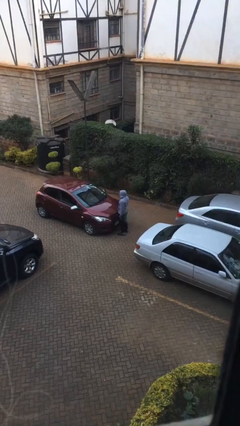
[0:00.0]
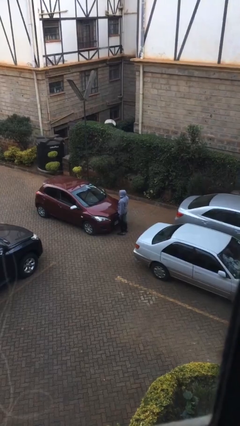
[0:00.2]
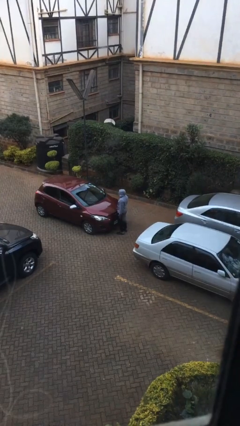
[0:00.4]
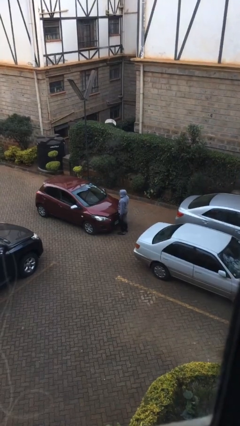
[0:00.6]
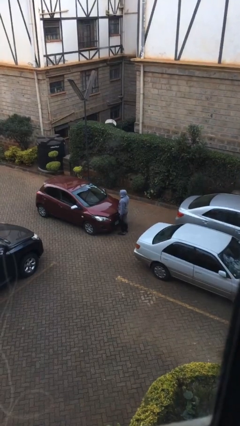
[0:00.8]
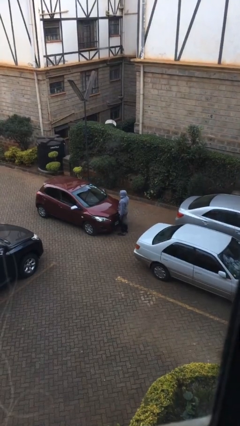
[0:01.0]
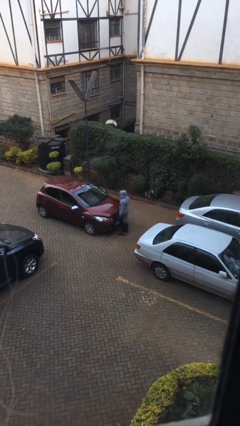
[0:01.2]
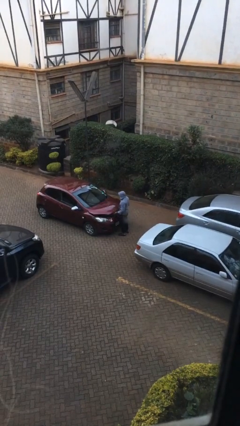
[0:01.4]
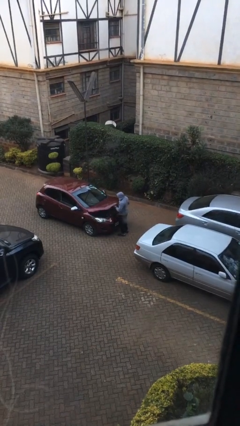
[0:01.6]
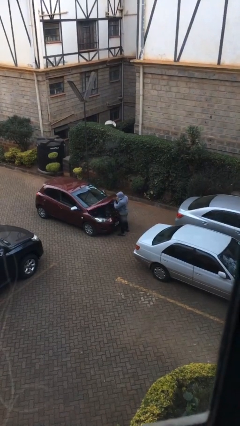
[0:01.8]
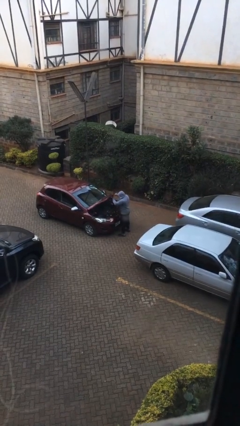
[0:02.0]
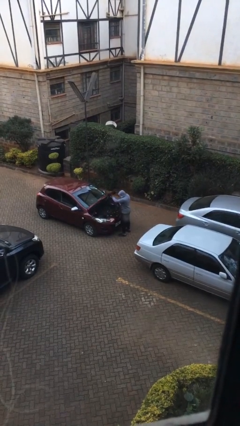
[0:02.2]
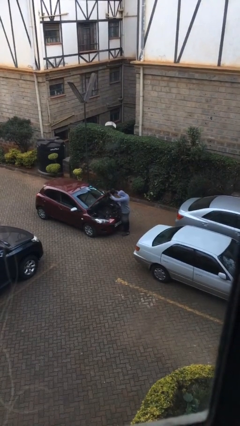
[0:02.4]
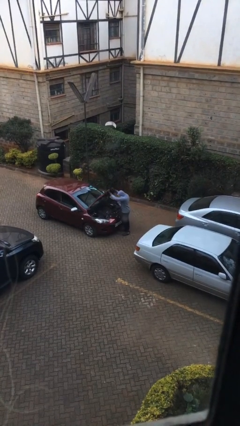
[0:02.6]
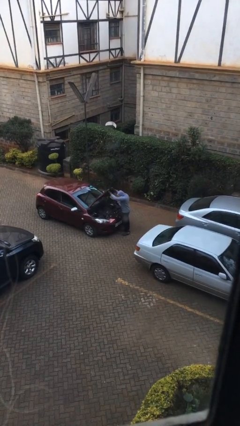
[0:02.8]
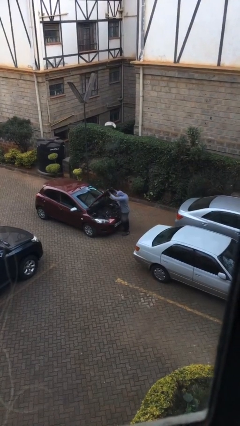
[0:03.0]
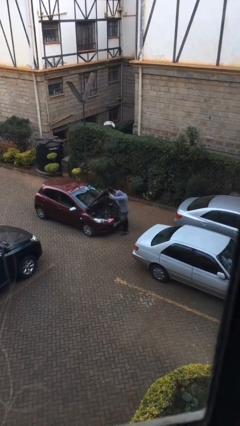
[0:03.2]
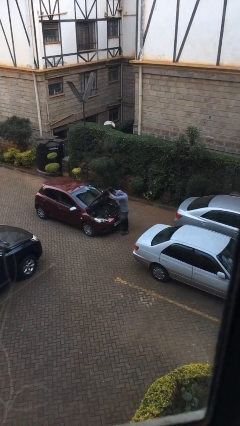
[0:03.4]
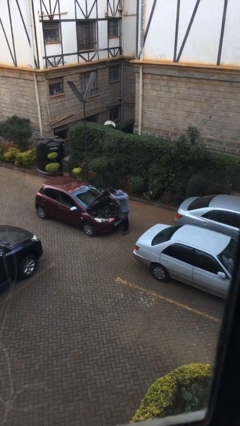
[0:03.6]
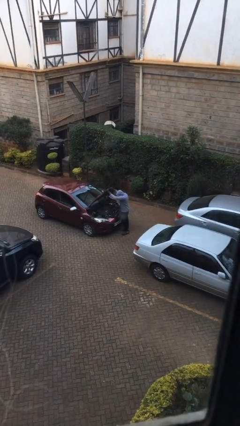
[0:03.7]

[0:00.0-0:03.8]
person opens car hood

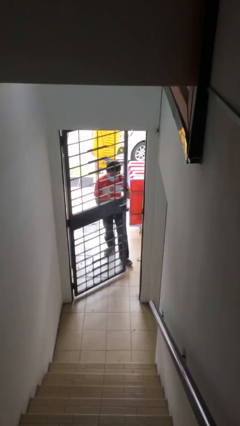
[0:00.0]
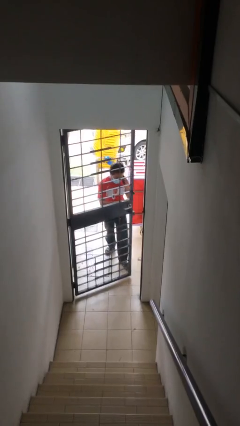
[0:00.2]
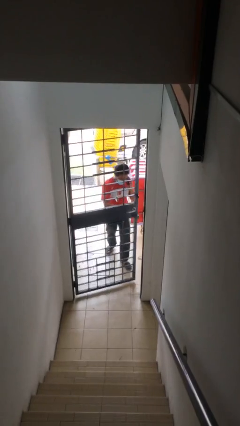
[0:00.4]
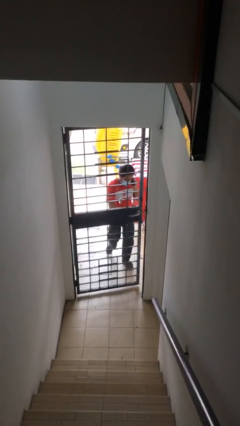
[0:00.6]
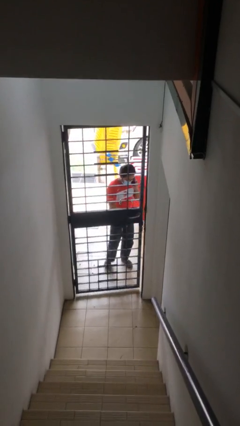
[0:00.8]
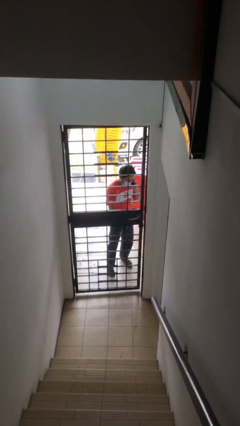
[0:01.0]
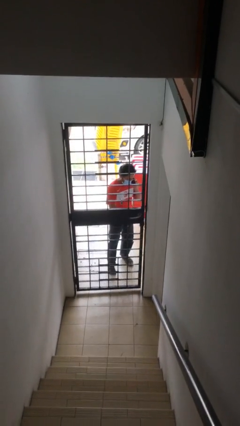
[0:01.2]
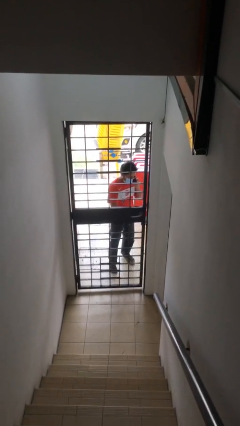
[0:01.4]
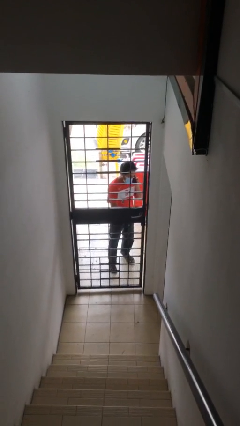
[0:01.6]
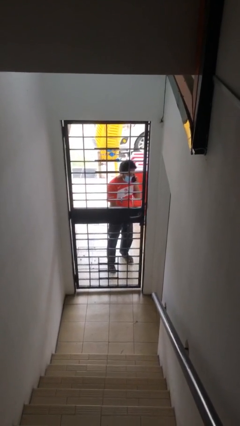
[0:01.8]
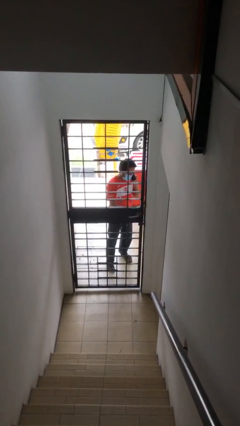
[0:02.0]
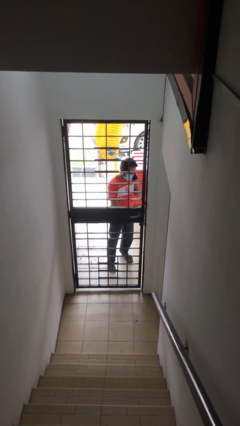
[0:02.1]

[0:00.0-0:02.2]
person closes facility door

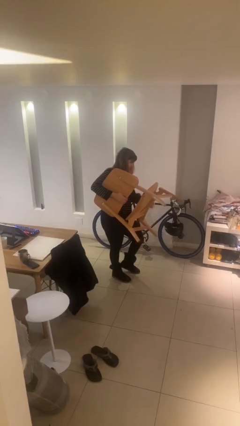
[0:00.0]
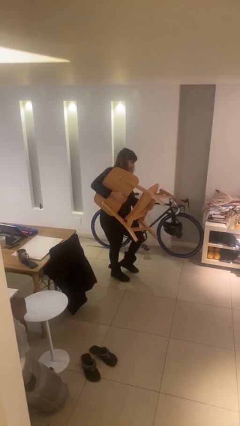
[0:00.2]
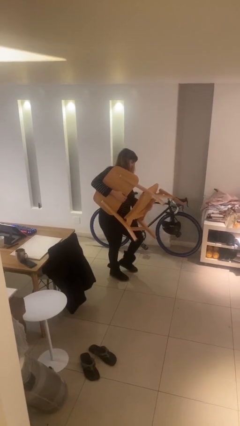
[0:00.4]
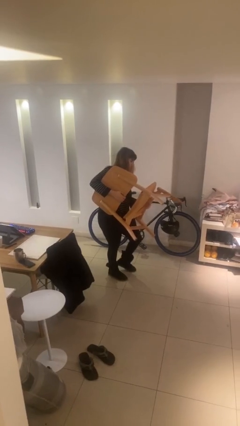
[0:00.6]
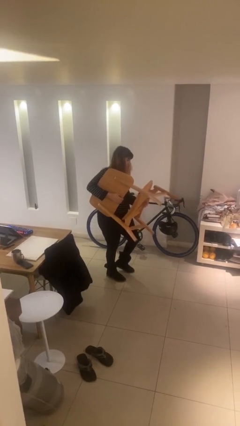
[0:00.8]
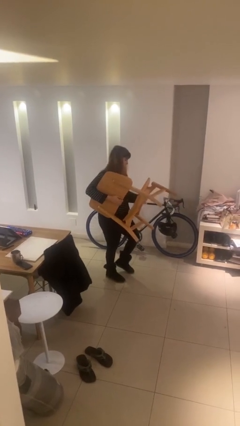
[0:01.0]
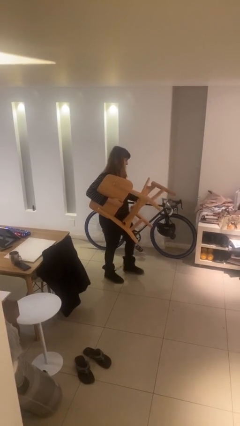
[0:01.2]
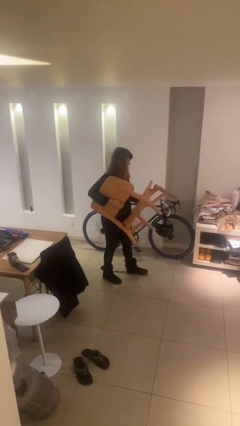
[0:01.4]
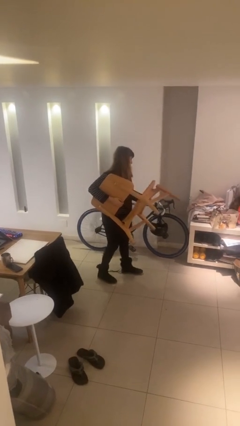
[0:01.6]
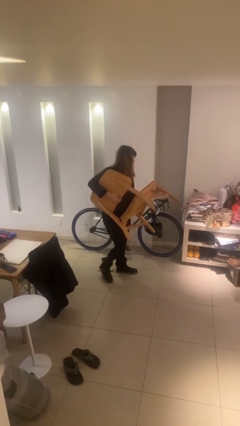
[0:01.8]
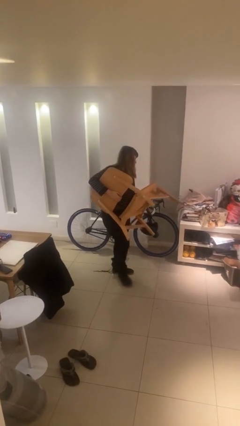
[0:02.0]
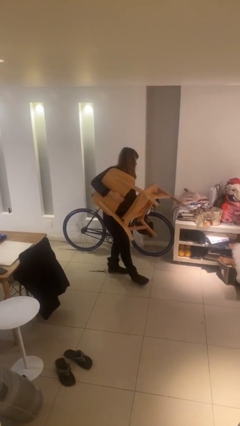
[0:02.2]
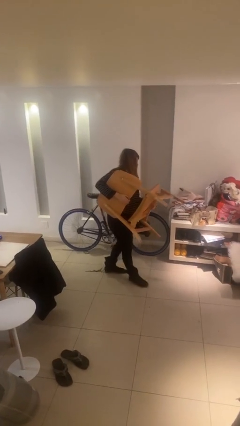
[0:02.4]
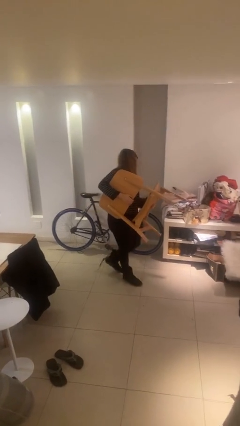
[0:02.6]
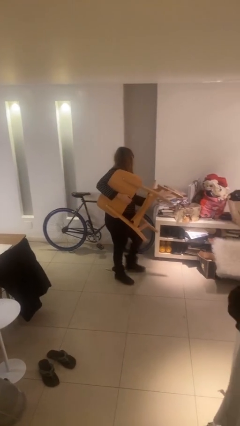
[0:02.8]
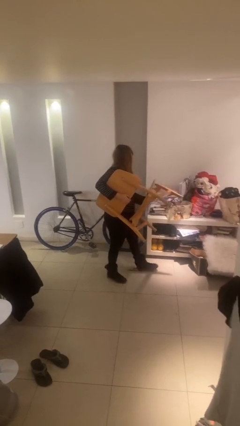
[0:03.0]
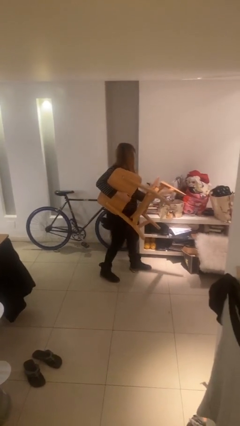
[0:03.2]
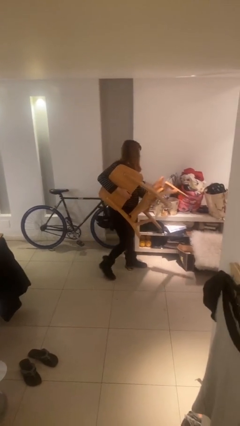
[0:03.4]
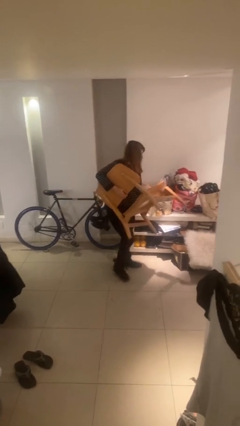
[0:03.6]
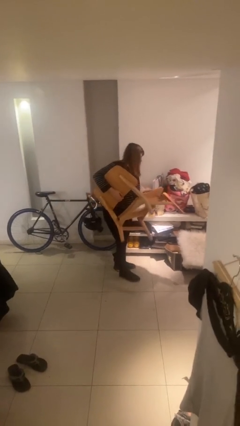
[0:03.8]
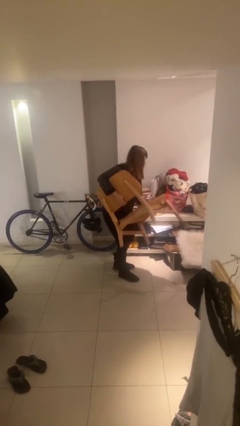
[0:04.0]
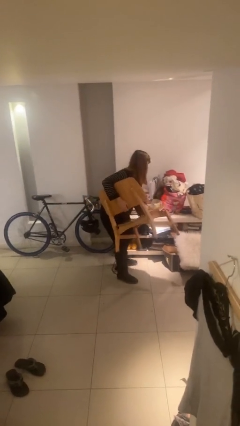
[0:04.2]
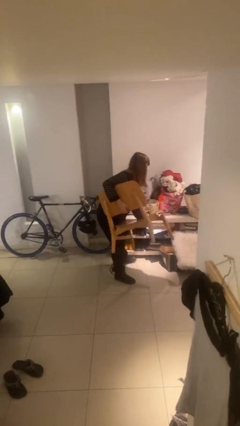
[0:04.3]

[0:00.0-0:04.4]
person carries heavy object

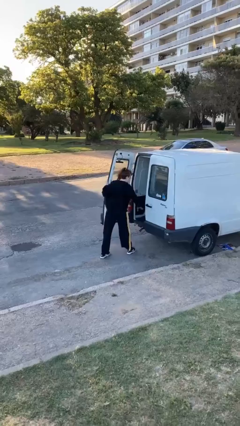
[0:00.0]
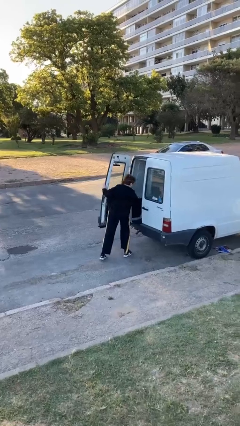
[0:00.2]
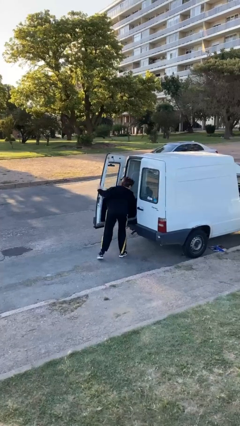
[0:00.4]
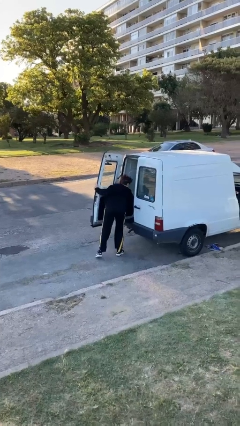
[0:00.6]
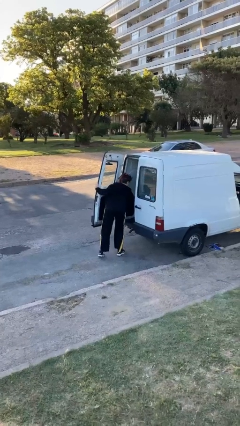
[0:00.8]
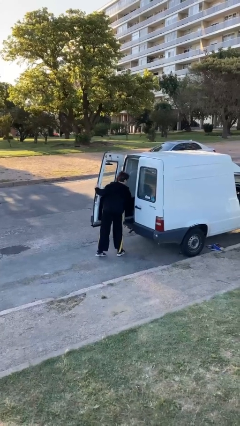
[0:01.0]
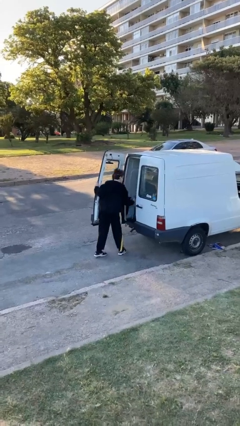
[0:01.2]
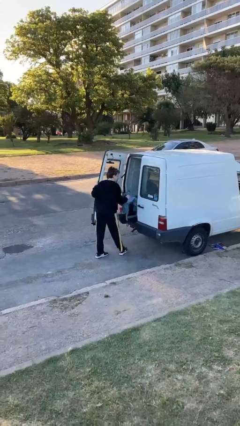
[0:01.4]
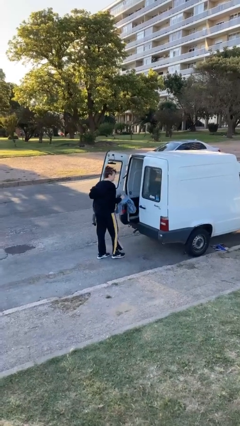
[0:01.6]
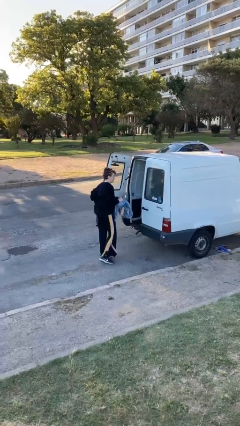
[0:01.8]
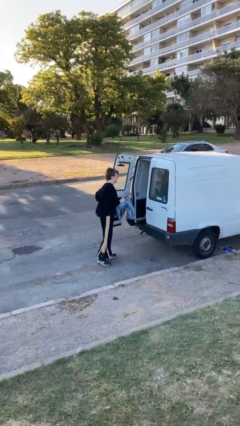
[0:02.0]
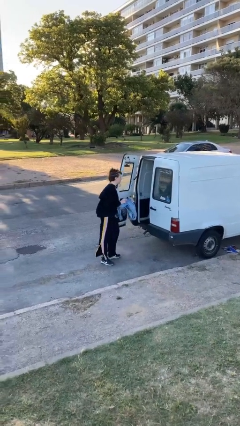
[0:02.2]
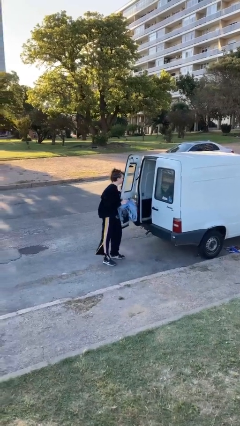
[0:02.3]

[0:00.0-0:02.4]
person unloads car

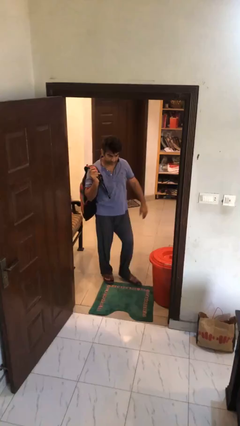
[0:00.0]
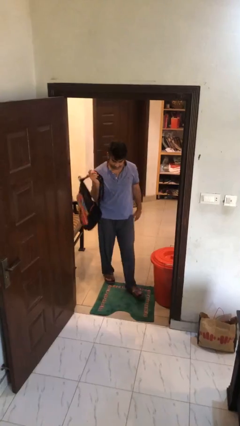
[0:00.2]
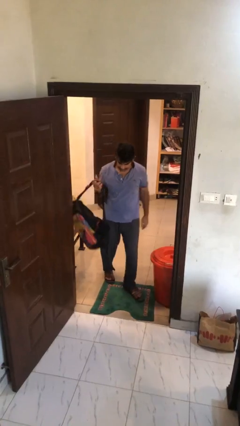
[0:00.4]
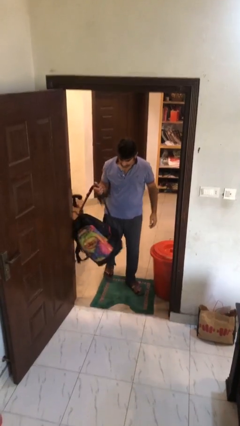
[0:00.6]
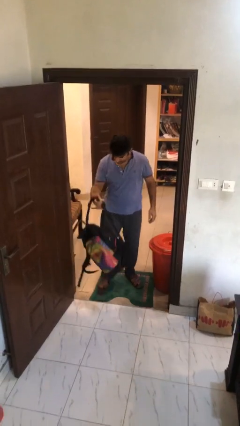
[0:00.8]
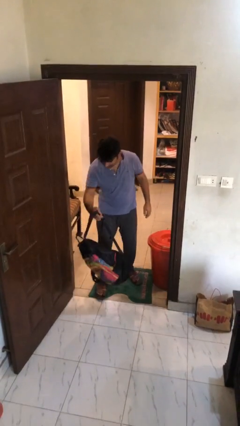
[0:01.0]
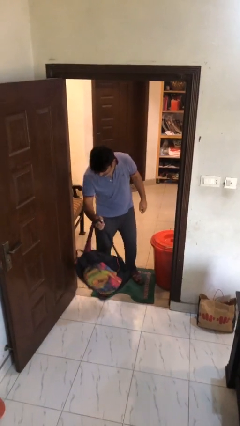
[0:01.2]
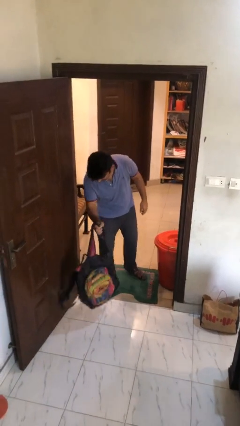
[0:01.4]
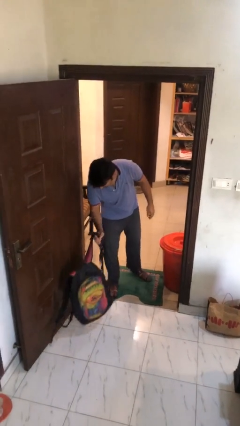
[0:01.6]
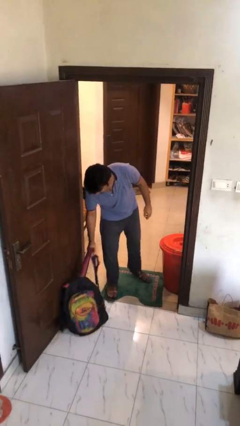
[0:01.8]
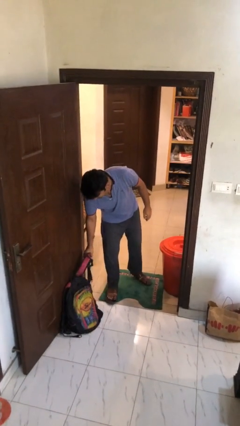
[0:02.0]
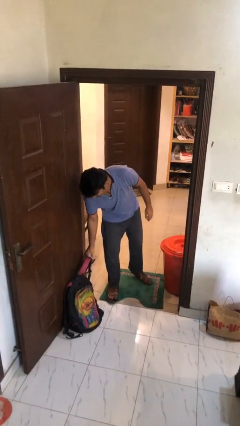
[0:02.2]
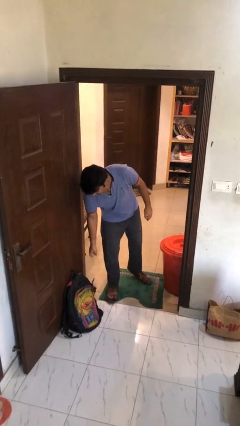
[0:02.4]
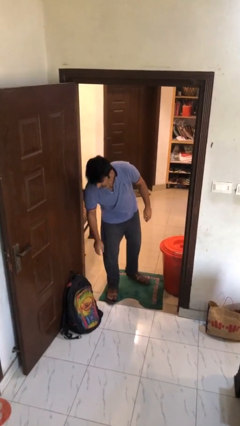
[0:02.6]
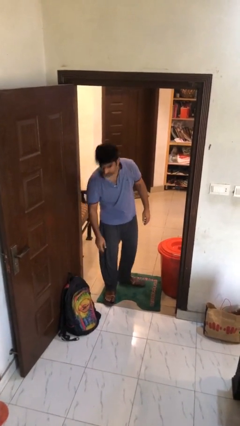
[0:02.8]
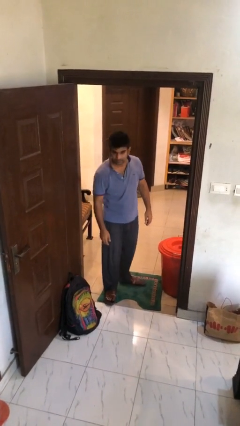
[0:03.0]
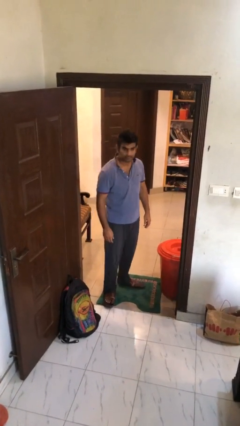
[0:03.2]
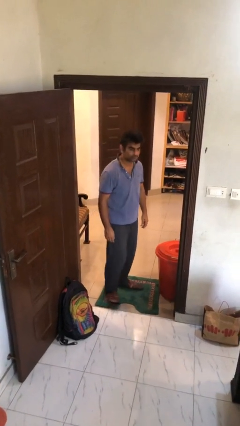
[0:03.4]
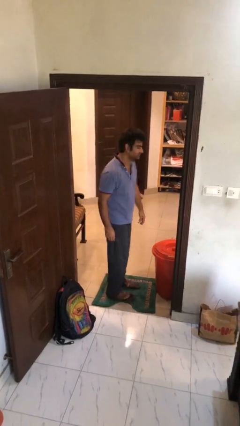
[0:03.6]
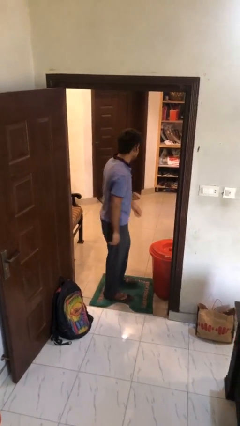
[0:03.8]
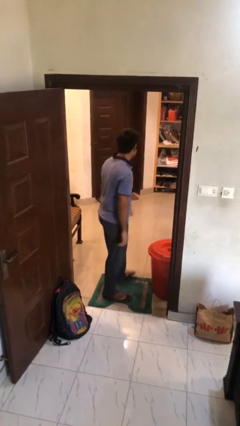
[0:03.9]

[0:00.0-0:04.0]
person puts down object on floor

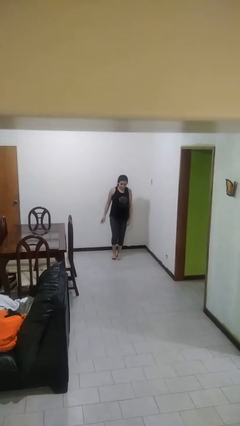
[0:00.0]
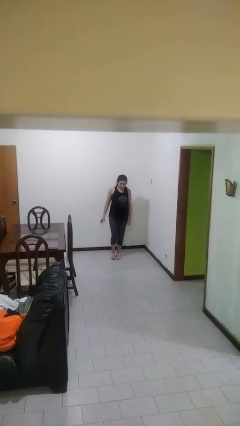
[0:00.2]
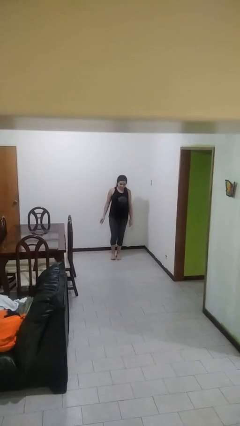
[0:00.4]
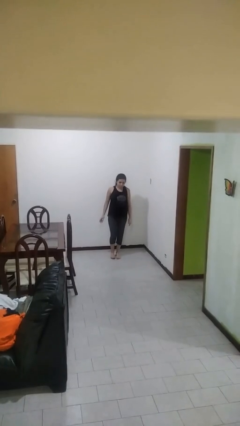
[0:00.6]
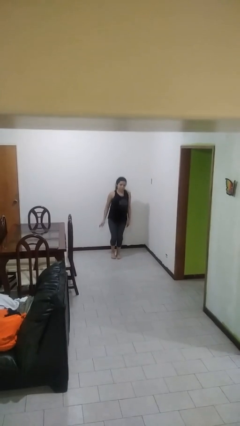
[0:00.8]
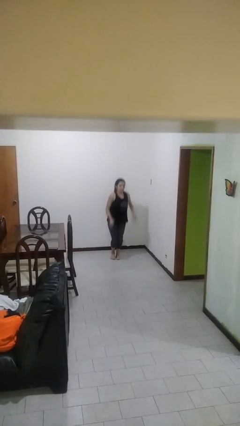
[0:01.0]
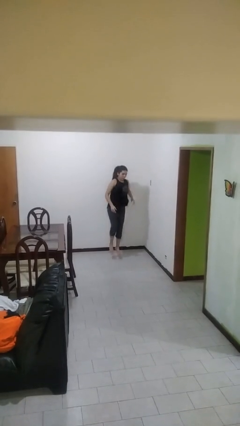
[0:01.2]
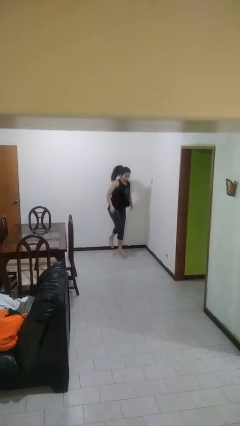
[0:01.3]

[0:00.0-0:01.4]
person jumps
